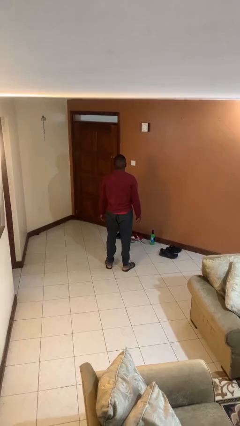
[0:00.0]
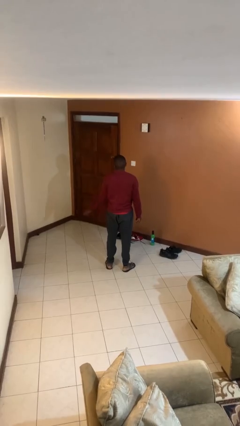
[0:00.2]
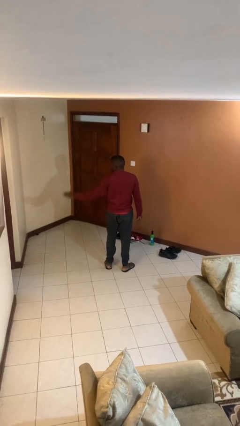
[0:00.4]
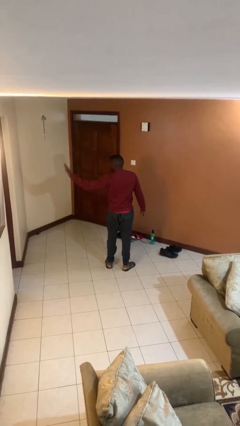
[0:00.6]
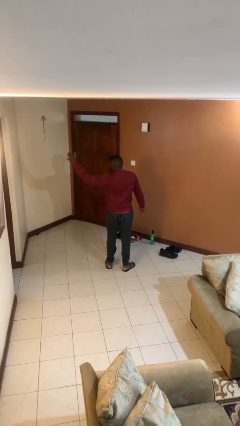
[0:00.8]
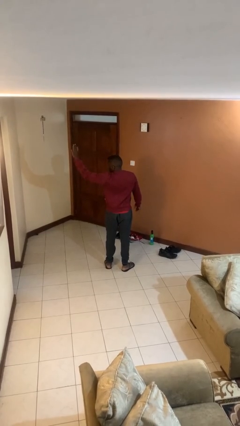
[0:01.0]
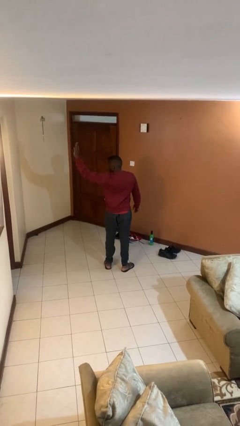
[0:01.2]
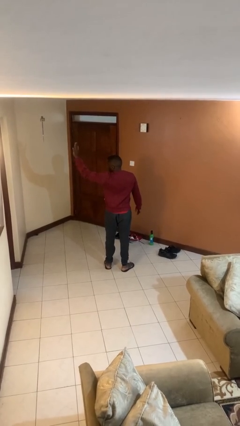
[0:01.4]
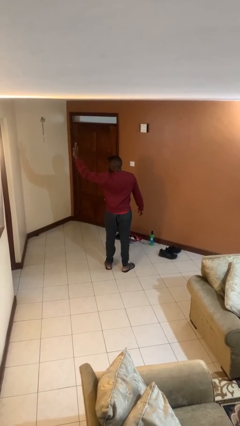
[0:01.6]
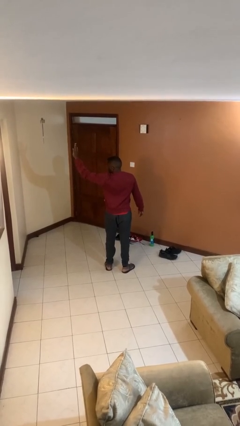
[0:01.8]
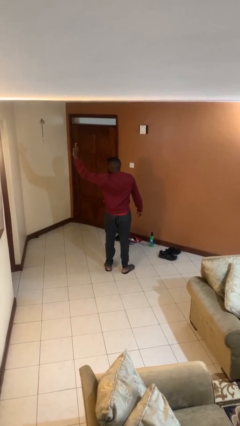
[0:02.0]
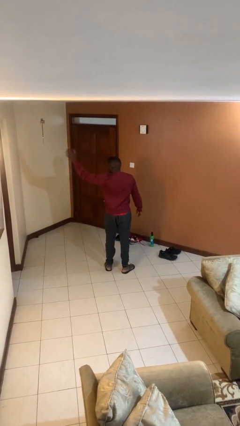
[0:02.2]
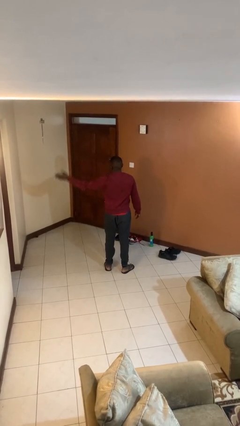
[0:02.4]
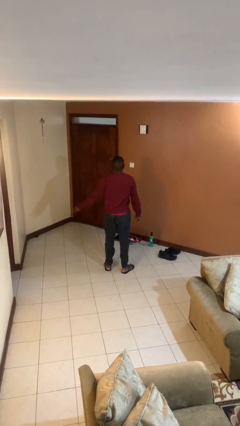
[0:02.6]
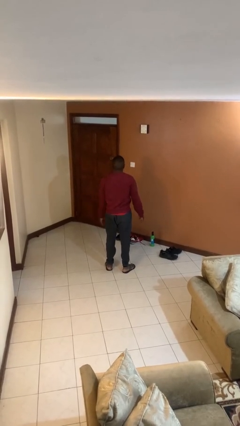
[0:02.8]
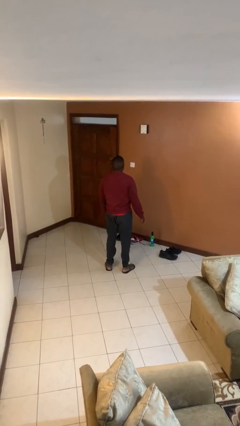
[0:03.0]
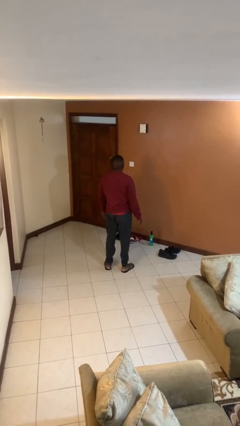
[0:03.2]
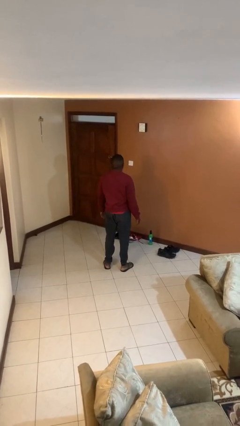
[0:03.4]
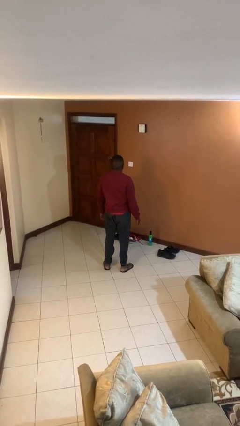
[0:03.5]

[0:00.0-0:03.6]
person waves at person

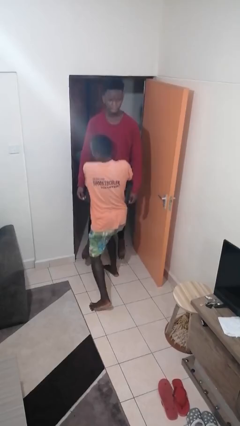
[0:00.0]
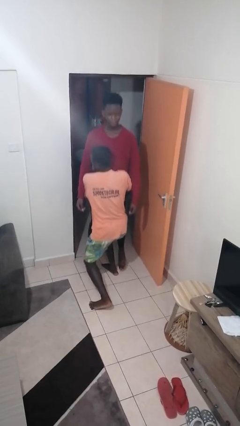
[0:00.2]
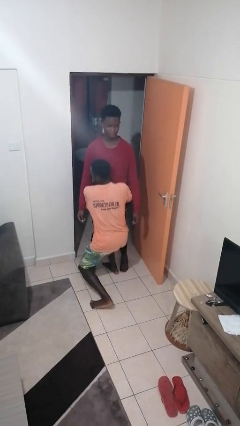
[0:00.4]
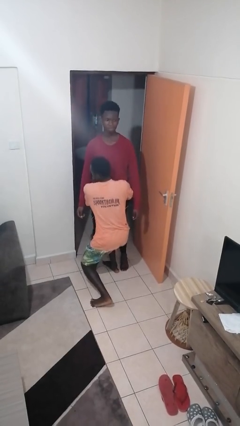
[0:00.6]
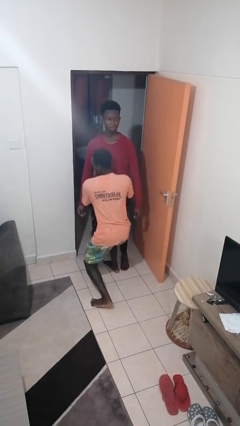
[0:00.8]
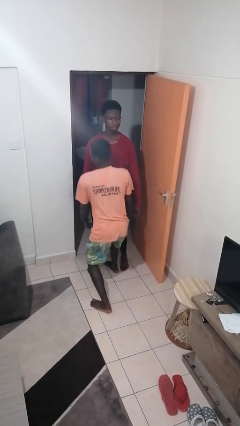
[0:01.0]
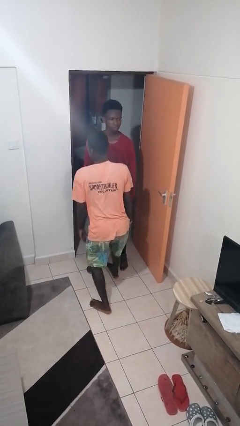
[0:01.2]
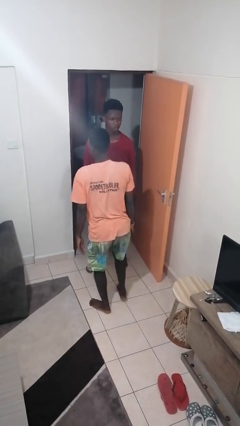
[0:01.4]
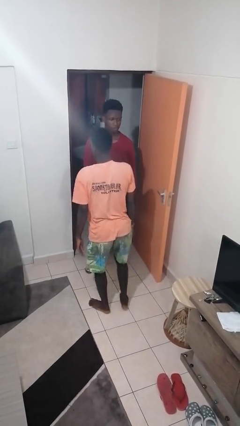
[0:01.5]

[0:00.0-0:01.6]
person puts down person

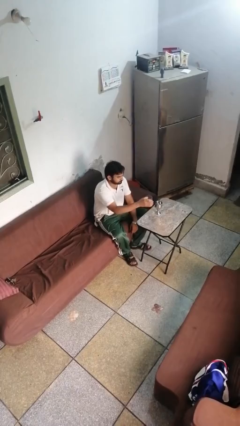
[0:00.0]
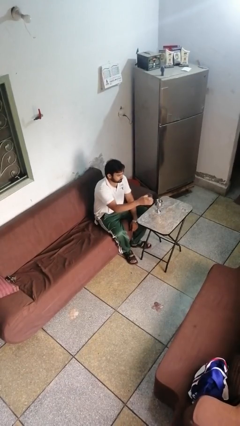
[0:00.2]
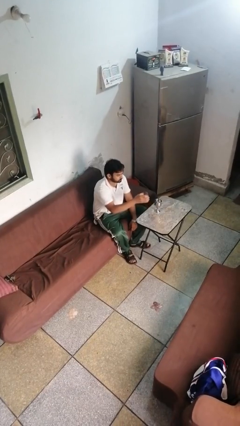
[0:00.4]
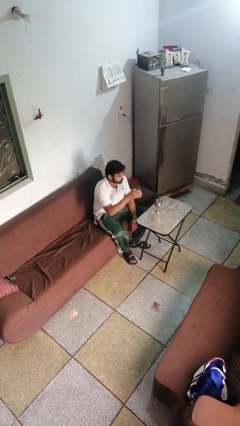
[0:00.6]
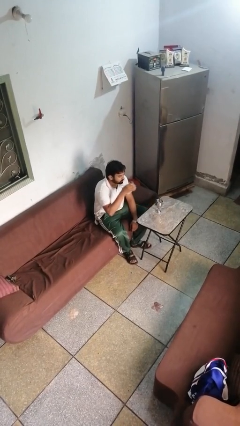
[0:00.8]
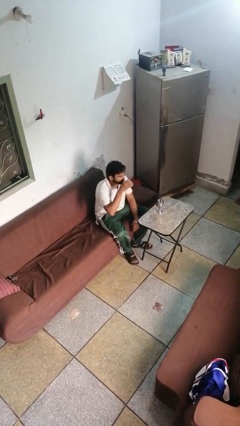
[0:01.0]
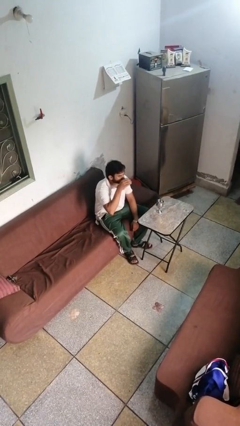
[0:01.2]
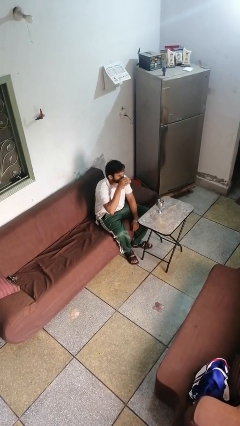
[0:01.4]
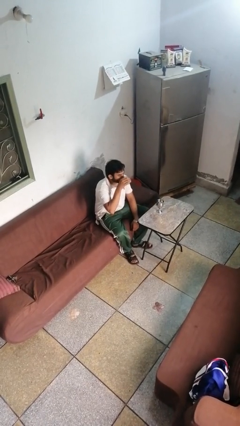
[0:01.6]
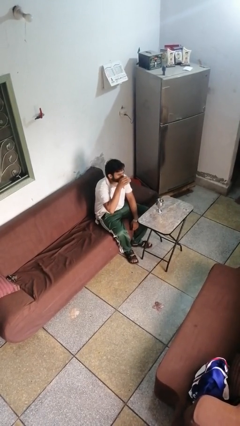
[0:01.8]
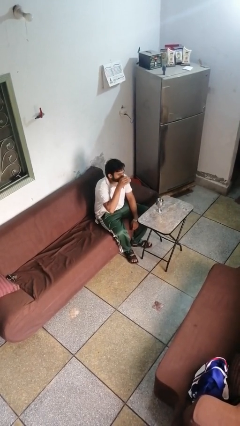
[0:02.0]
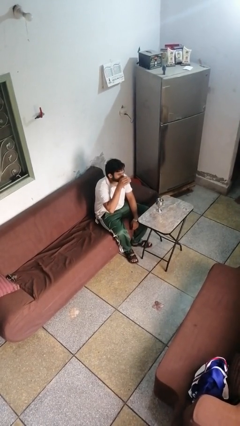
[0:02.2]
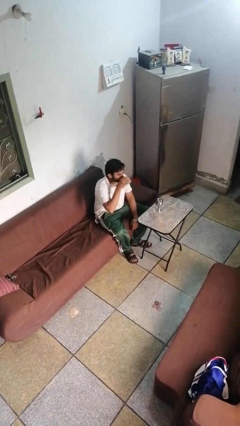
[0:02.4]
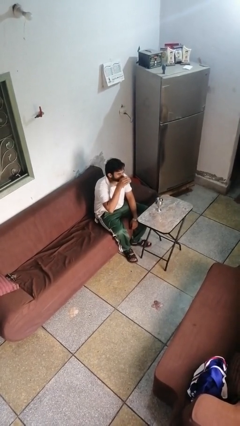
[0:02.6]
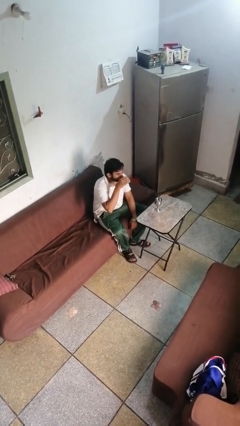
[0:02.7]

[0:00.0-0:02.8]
person drinks from shotglass

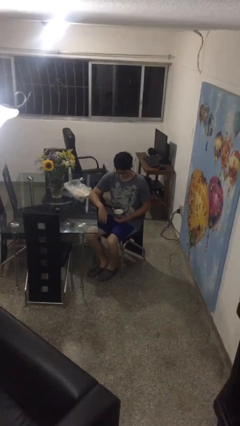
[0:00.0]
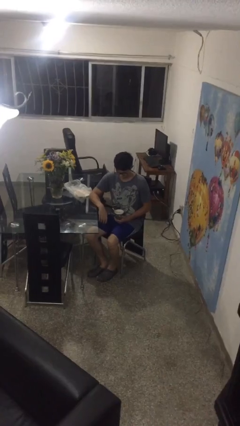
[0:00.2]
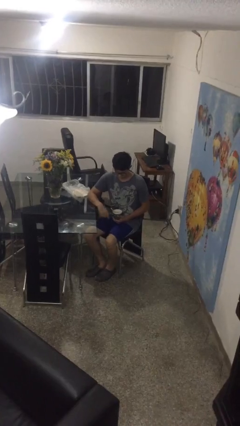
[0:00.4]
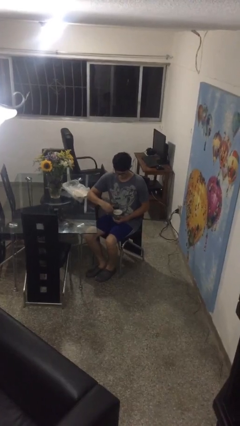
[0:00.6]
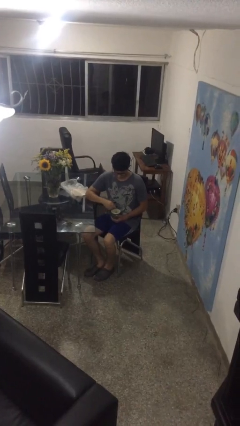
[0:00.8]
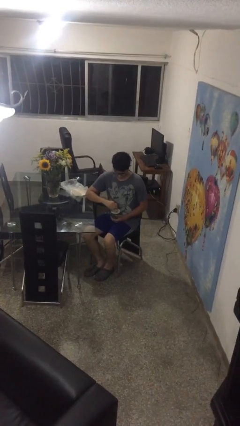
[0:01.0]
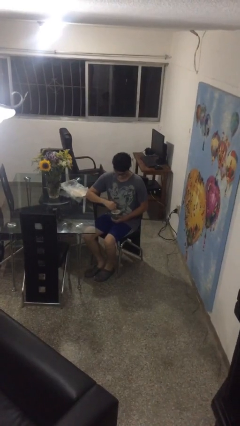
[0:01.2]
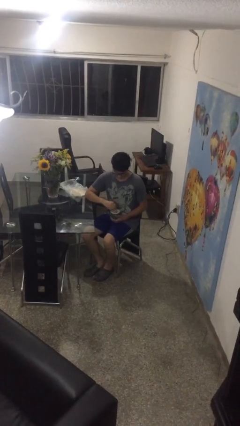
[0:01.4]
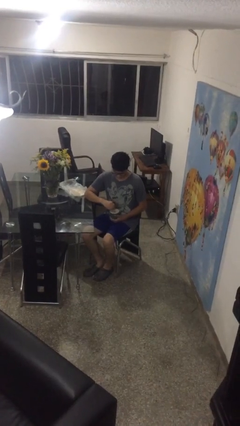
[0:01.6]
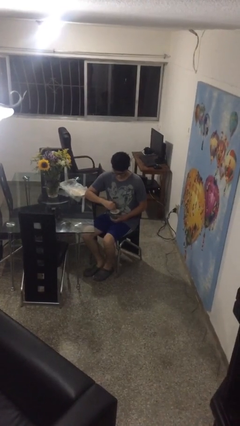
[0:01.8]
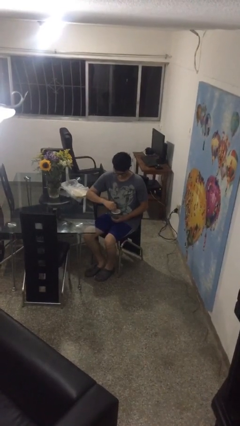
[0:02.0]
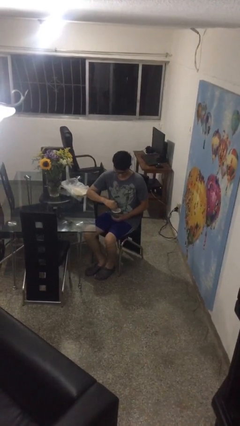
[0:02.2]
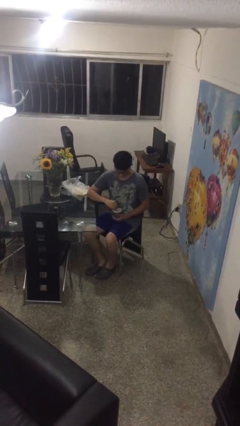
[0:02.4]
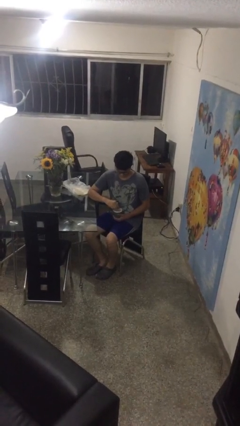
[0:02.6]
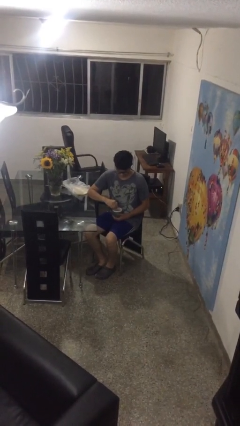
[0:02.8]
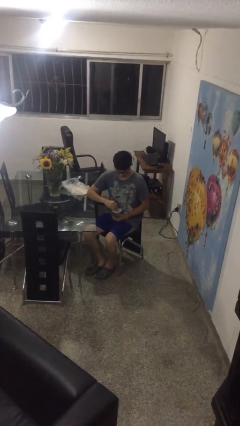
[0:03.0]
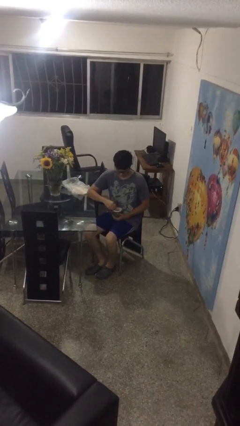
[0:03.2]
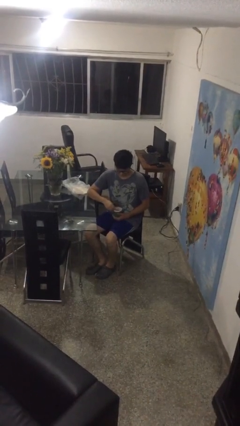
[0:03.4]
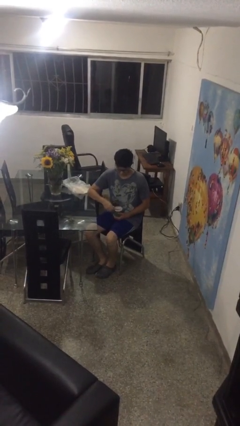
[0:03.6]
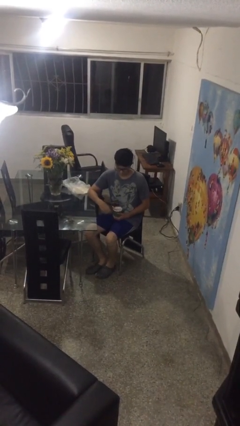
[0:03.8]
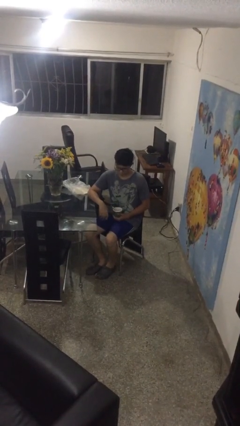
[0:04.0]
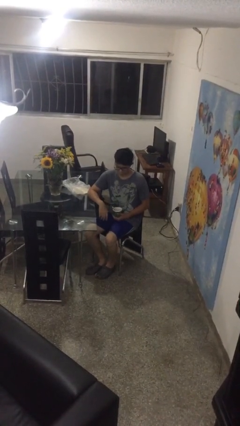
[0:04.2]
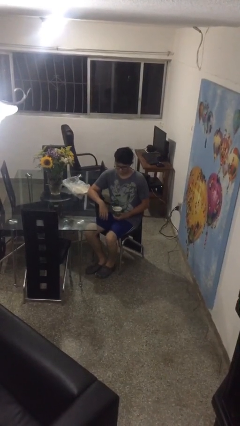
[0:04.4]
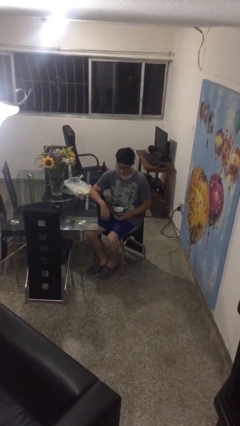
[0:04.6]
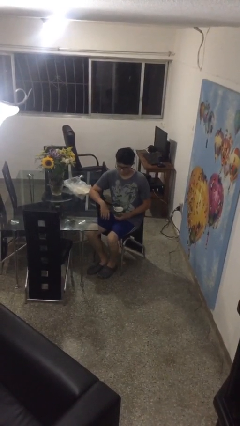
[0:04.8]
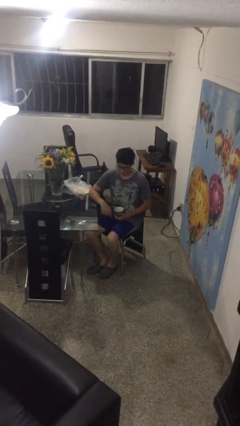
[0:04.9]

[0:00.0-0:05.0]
person stirs mug

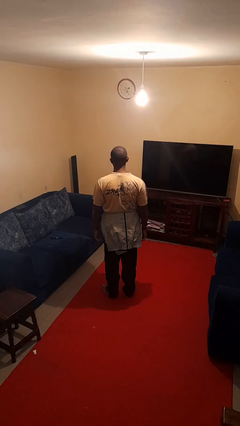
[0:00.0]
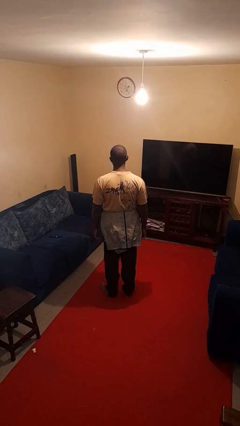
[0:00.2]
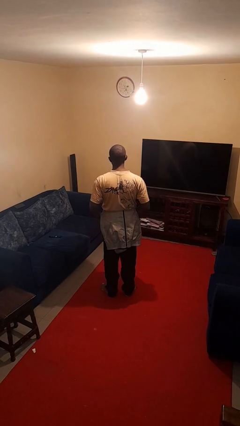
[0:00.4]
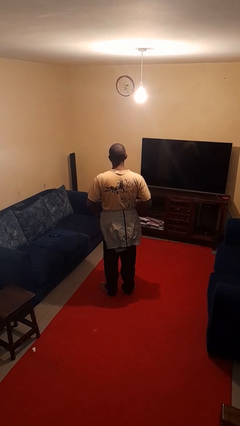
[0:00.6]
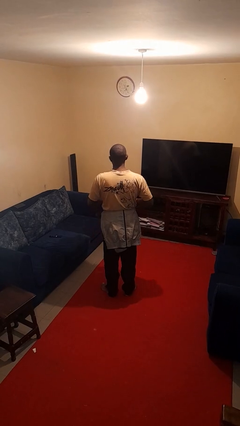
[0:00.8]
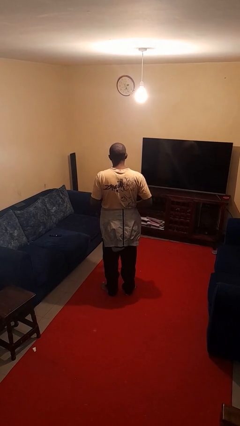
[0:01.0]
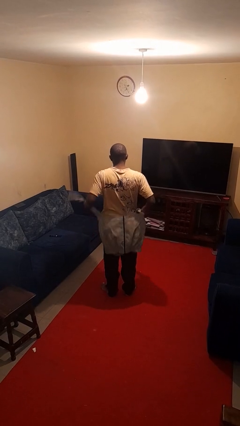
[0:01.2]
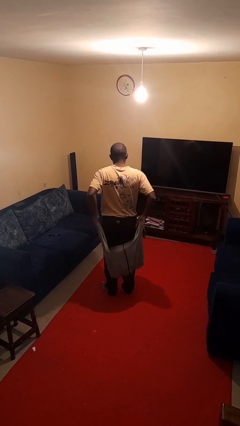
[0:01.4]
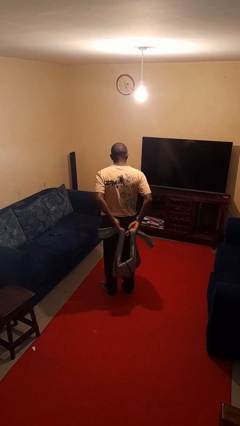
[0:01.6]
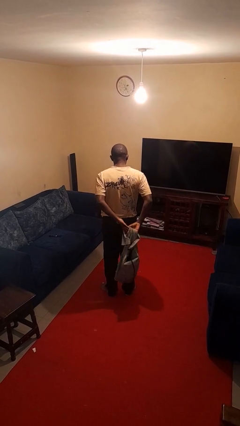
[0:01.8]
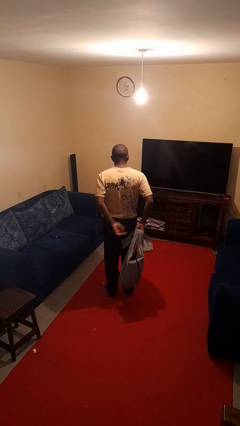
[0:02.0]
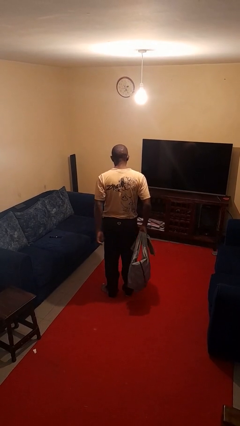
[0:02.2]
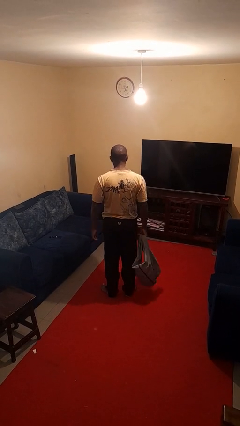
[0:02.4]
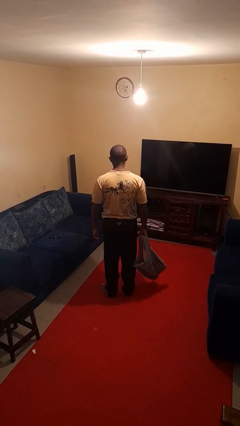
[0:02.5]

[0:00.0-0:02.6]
person unties jacket around waist

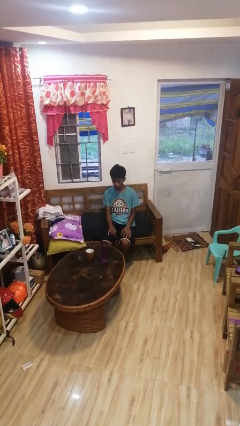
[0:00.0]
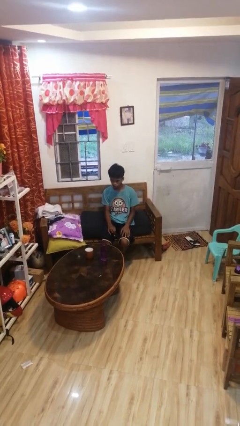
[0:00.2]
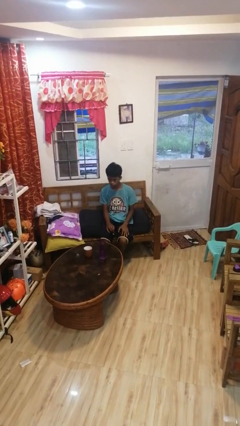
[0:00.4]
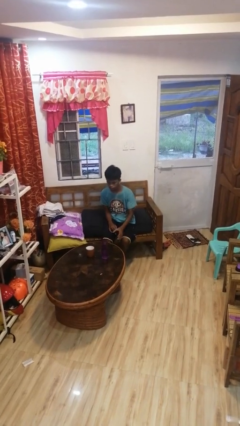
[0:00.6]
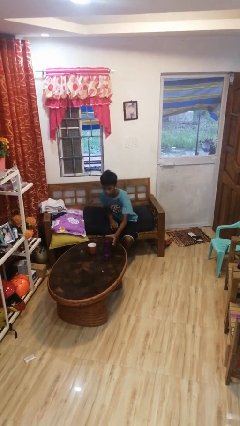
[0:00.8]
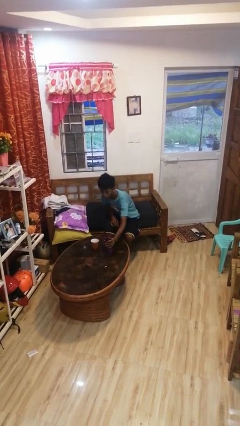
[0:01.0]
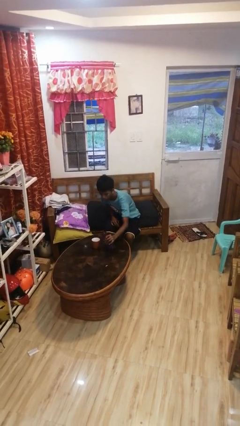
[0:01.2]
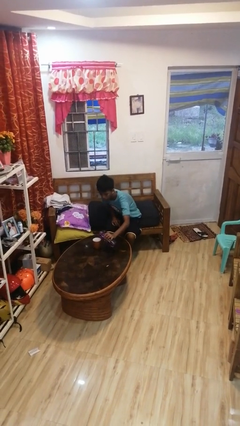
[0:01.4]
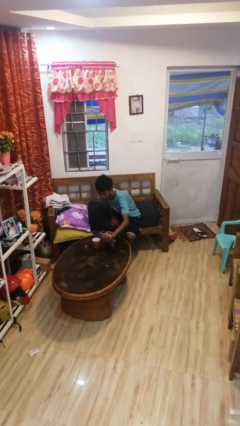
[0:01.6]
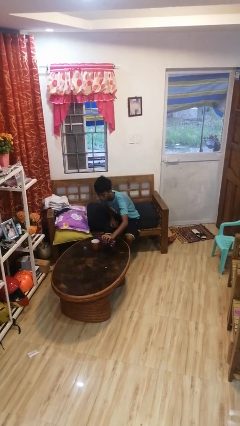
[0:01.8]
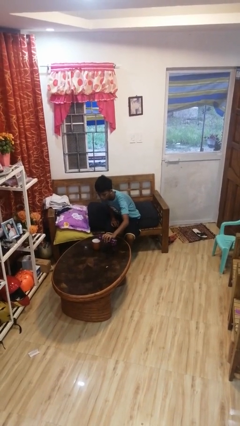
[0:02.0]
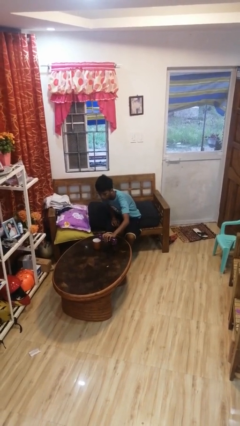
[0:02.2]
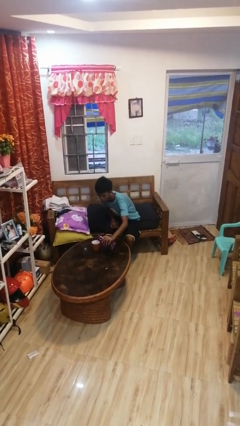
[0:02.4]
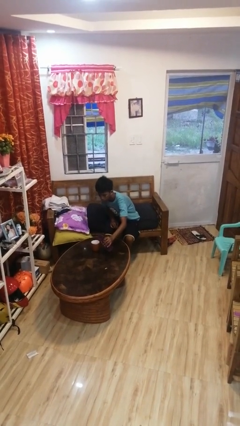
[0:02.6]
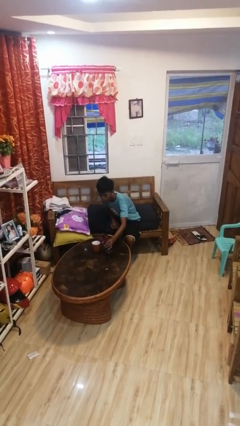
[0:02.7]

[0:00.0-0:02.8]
person pours liquid into cup
